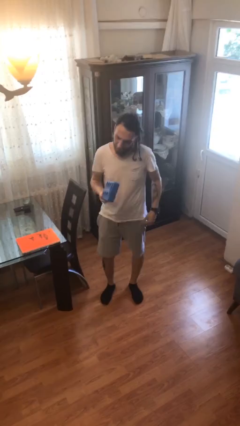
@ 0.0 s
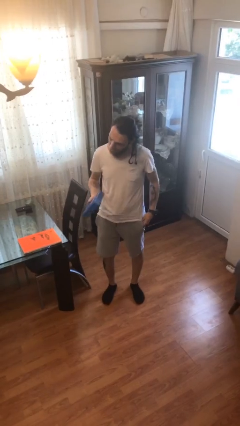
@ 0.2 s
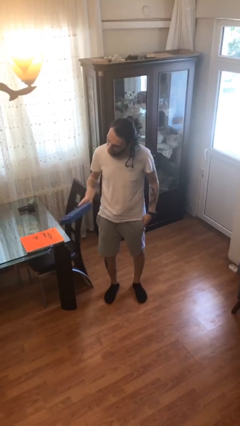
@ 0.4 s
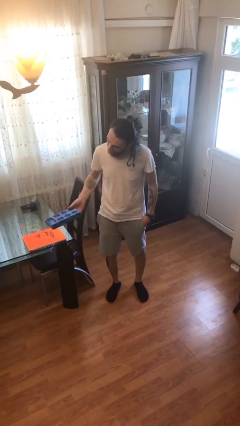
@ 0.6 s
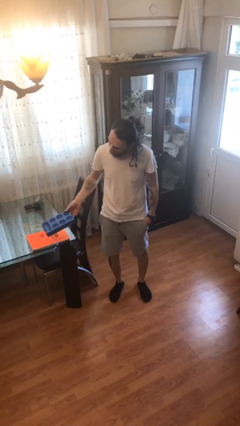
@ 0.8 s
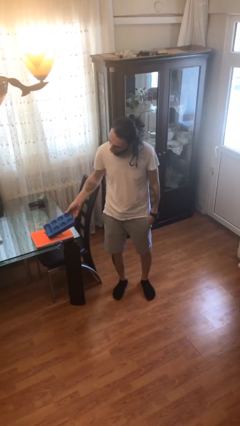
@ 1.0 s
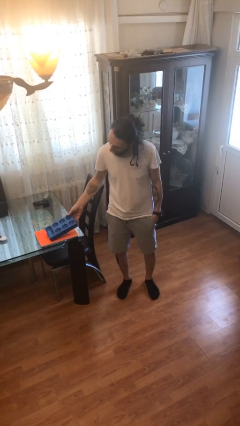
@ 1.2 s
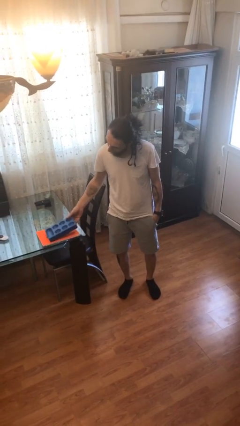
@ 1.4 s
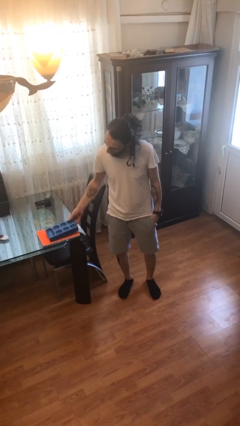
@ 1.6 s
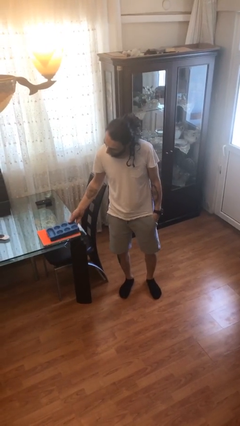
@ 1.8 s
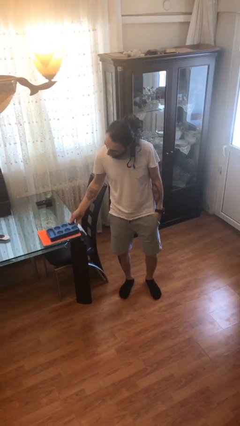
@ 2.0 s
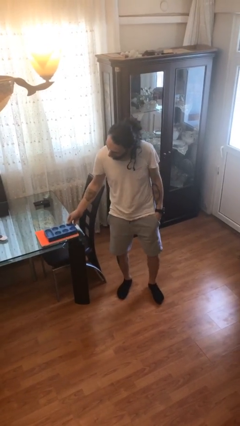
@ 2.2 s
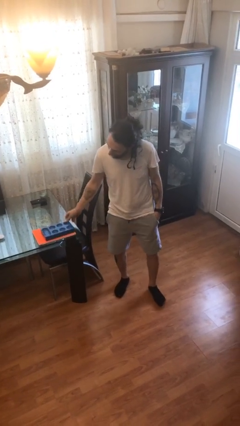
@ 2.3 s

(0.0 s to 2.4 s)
person puts down object on table

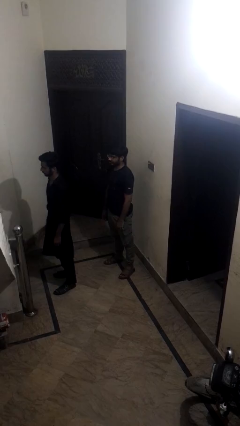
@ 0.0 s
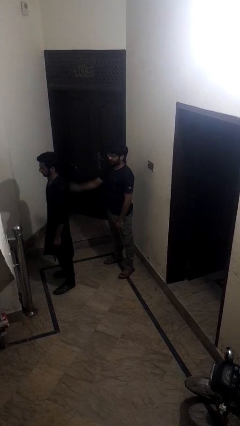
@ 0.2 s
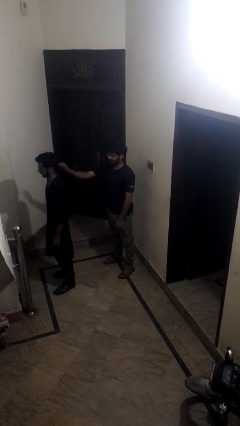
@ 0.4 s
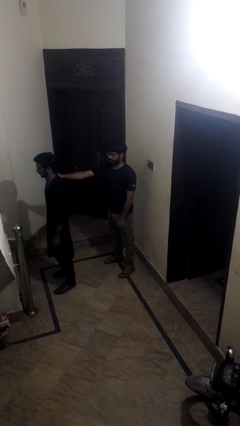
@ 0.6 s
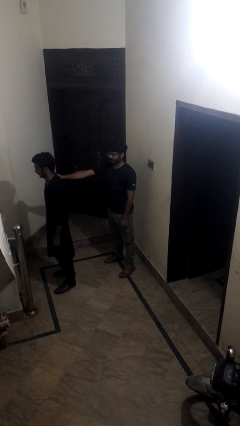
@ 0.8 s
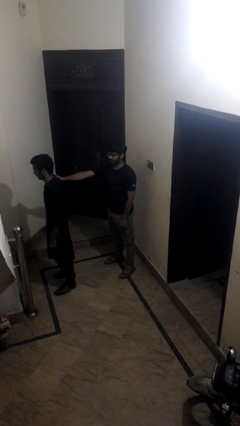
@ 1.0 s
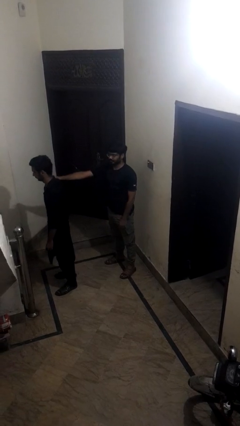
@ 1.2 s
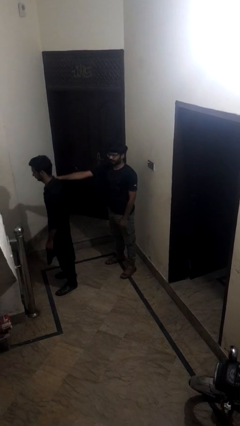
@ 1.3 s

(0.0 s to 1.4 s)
person grabs person by shoulder

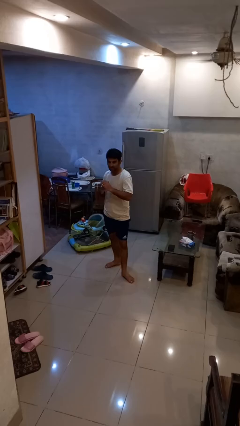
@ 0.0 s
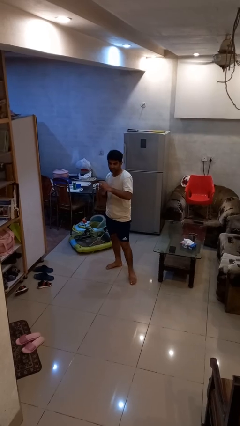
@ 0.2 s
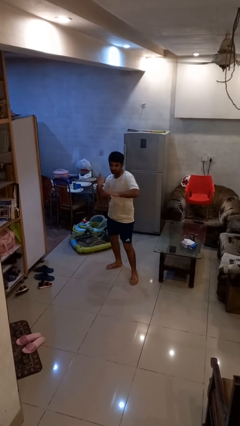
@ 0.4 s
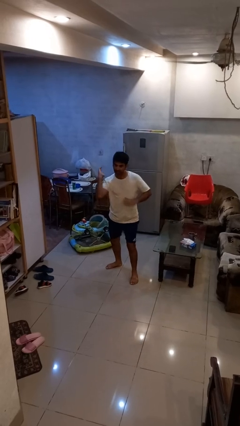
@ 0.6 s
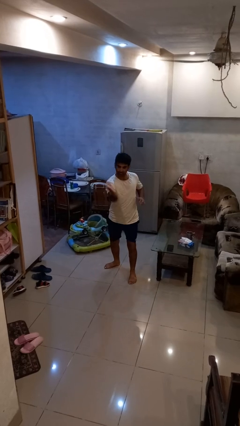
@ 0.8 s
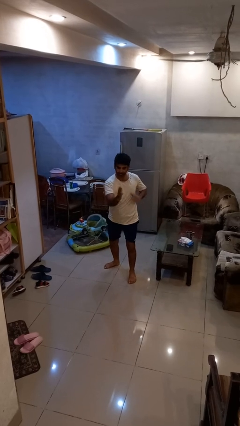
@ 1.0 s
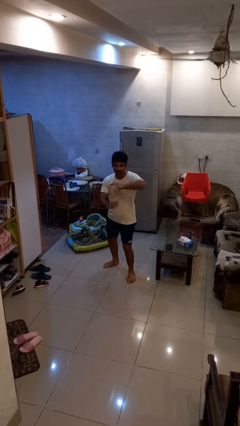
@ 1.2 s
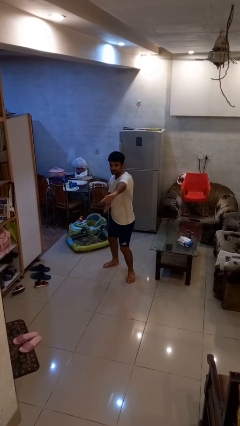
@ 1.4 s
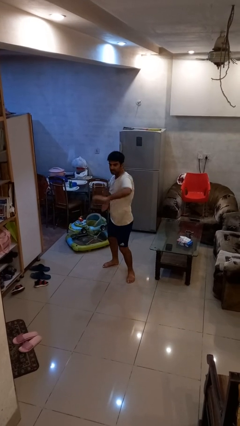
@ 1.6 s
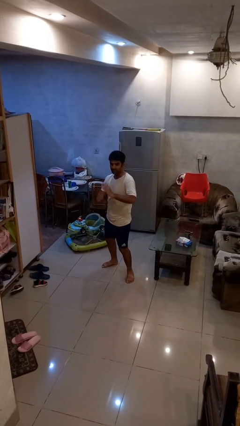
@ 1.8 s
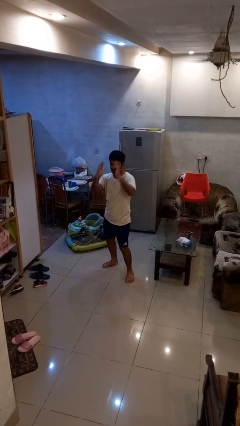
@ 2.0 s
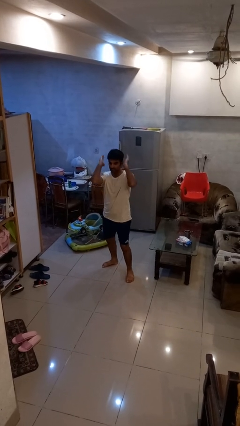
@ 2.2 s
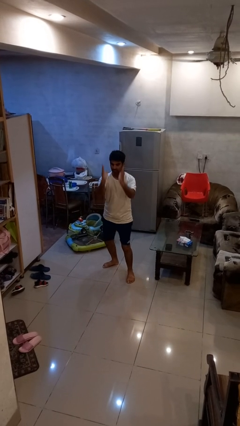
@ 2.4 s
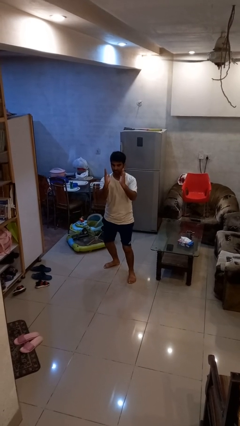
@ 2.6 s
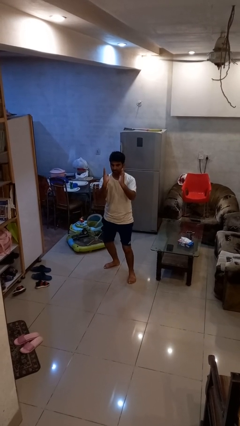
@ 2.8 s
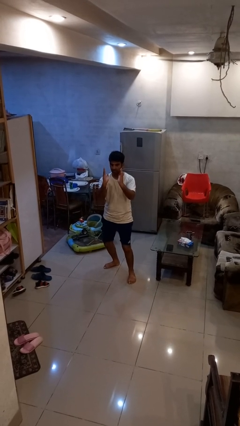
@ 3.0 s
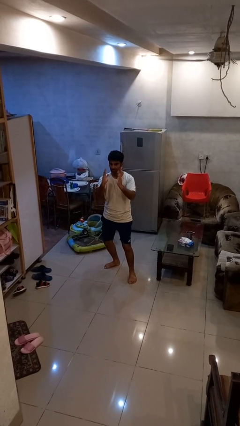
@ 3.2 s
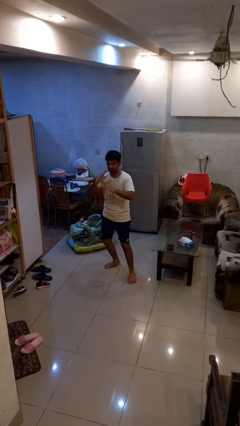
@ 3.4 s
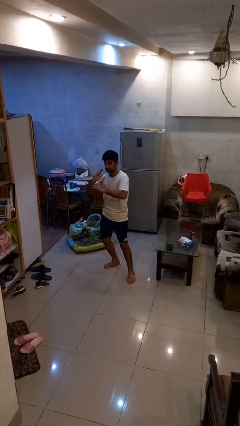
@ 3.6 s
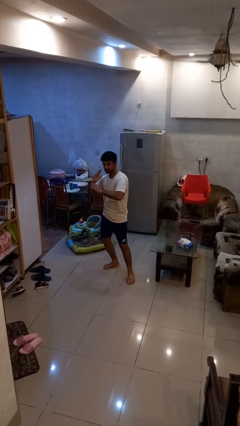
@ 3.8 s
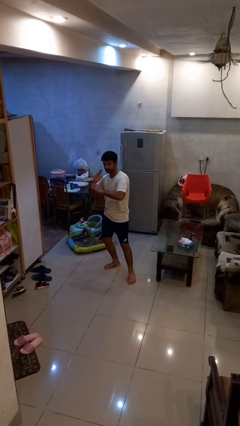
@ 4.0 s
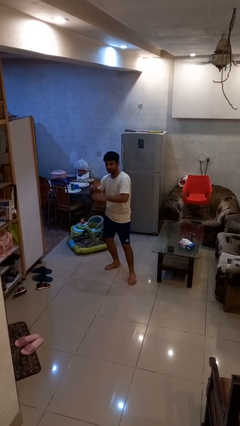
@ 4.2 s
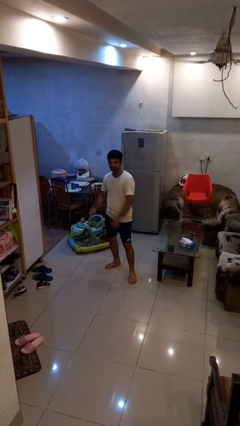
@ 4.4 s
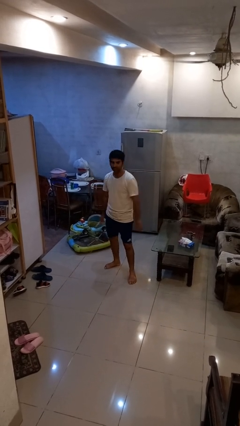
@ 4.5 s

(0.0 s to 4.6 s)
person karate chop

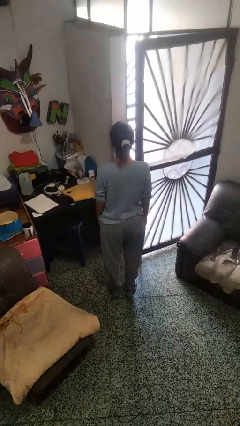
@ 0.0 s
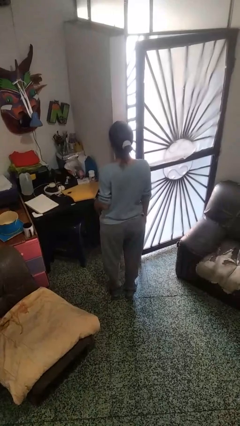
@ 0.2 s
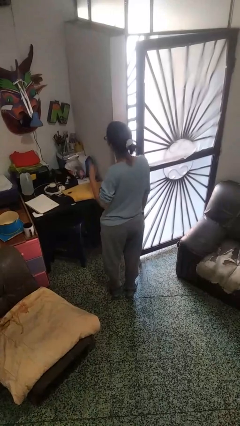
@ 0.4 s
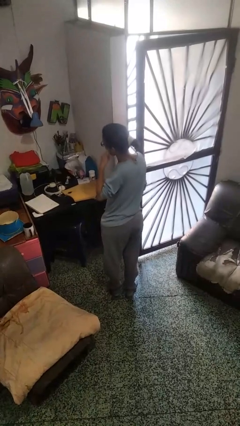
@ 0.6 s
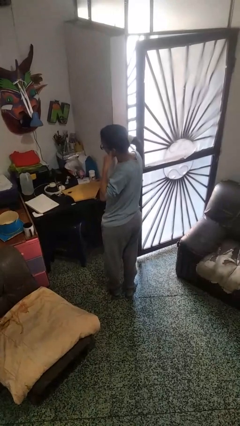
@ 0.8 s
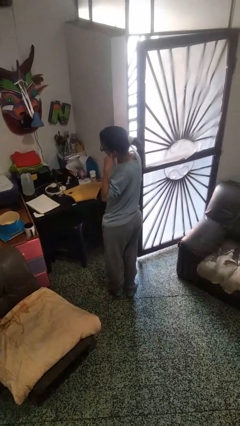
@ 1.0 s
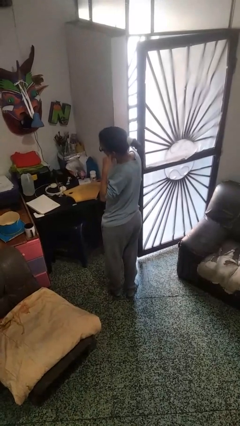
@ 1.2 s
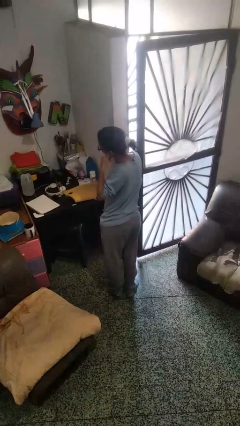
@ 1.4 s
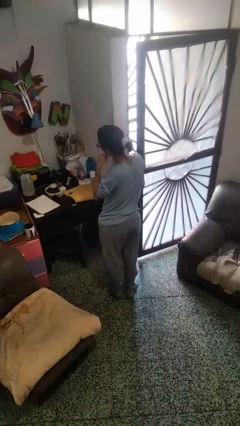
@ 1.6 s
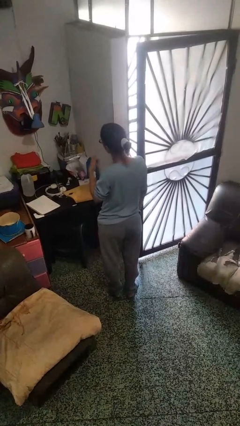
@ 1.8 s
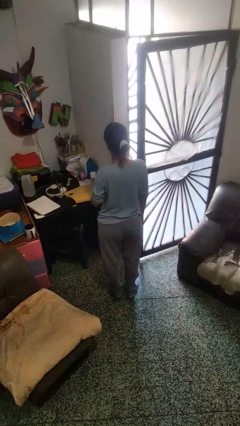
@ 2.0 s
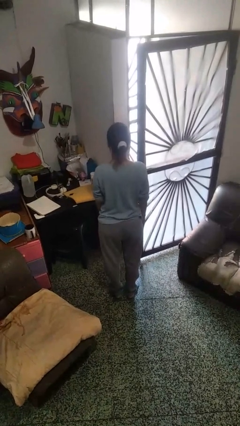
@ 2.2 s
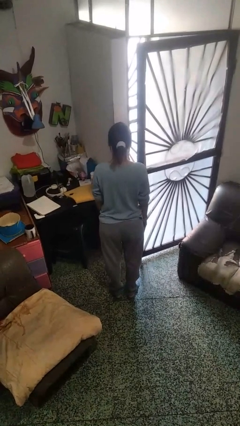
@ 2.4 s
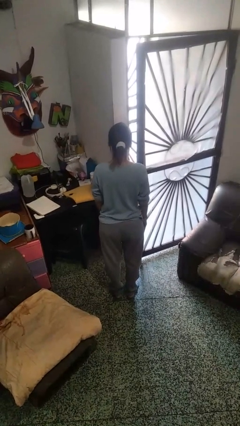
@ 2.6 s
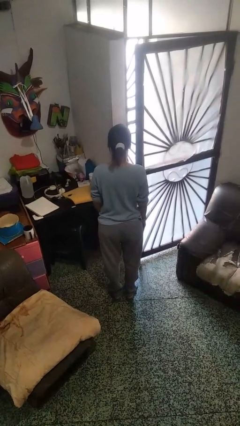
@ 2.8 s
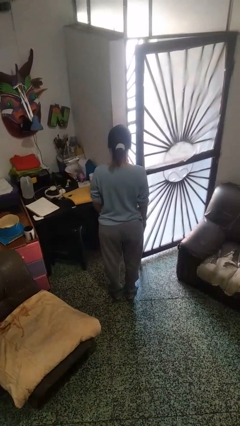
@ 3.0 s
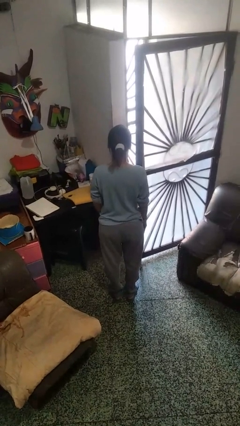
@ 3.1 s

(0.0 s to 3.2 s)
person gestures call me

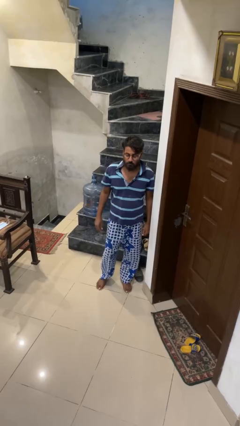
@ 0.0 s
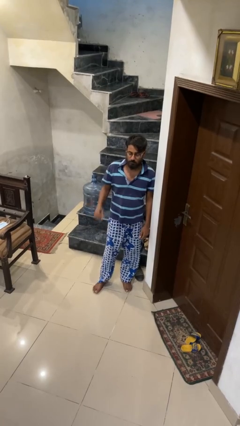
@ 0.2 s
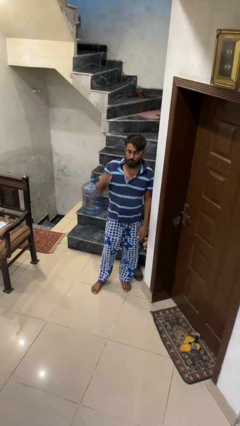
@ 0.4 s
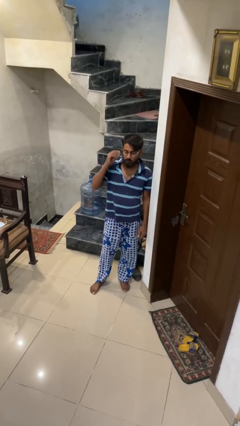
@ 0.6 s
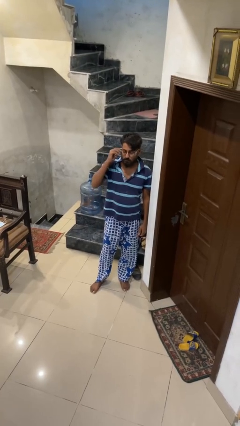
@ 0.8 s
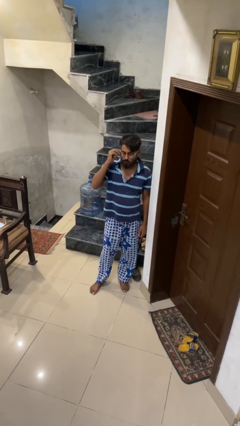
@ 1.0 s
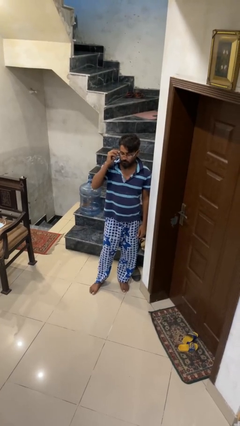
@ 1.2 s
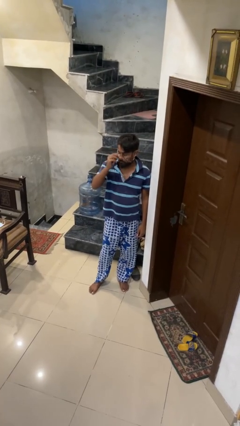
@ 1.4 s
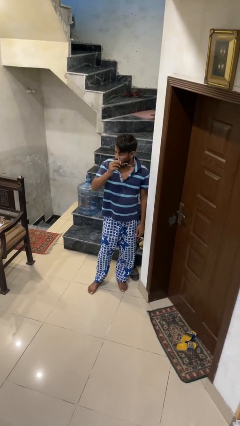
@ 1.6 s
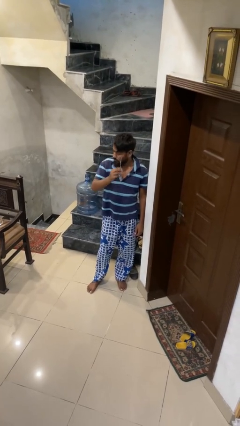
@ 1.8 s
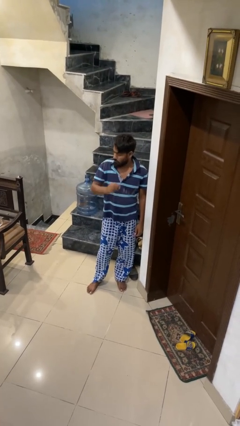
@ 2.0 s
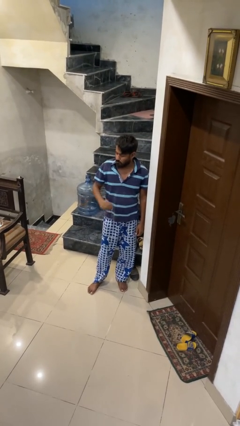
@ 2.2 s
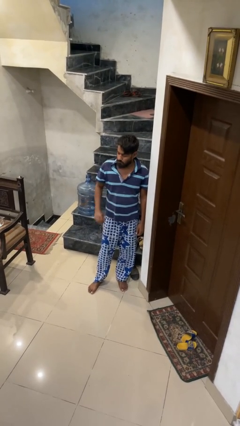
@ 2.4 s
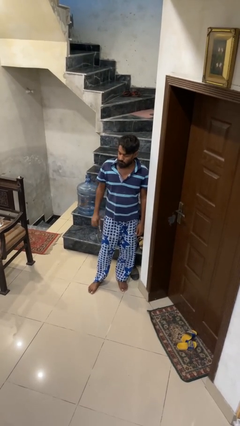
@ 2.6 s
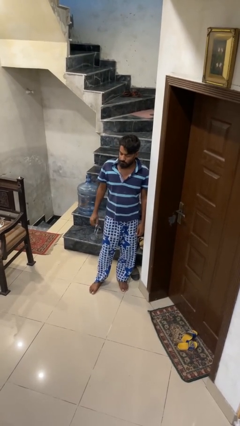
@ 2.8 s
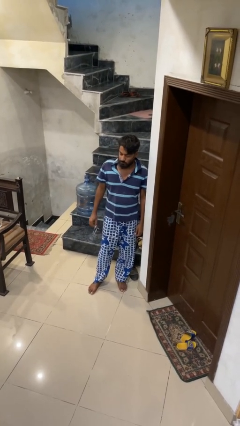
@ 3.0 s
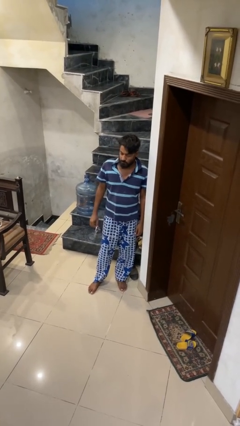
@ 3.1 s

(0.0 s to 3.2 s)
person takes off glasses

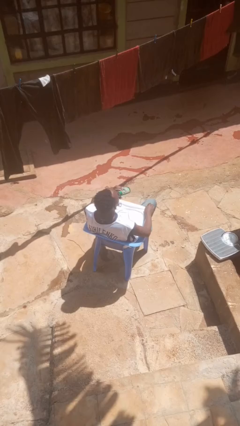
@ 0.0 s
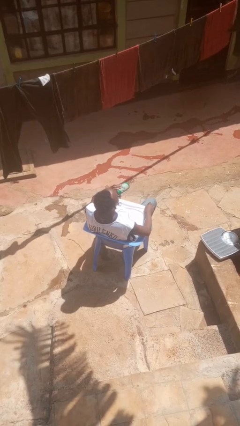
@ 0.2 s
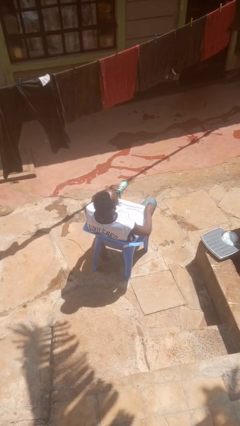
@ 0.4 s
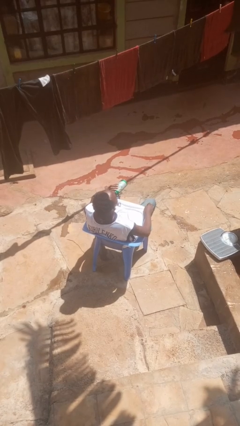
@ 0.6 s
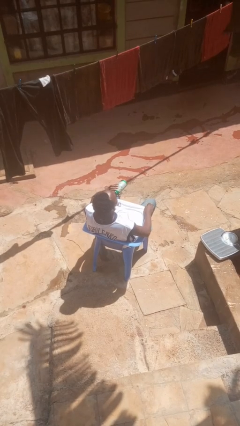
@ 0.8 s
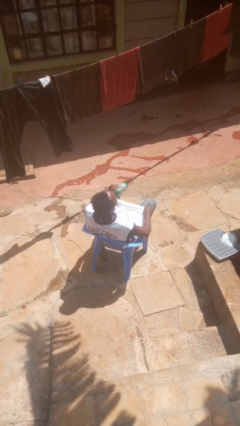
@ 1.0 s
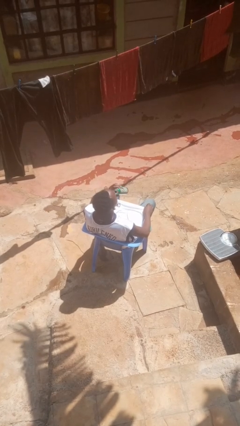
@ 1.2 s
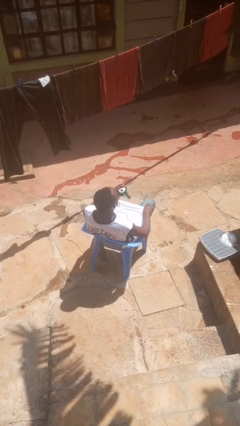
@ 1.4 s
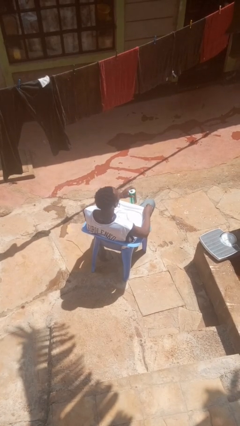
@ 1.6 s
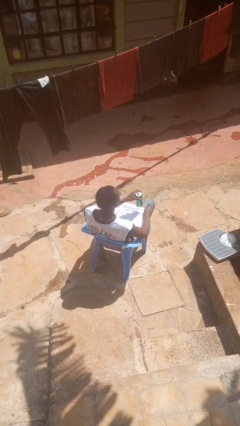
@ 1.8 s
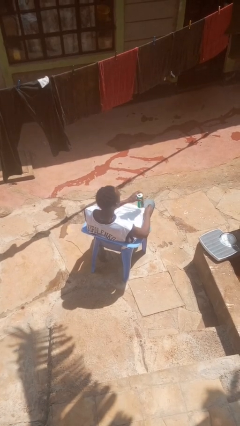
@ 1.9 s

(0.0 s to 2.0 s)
person drinks from beverage can

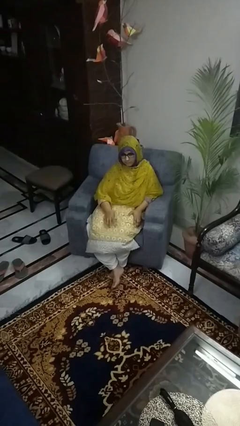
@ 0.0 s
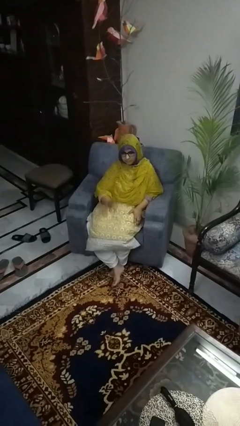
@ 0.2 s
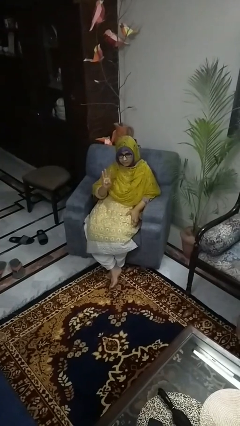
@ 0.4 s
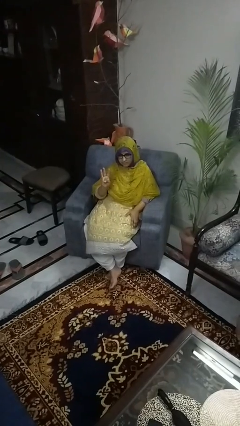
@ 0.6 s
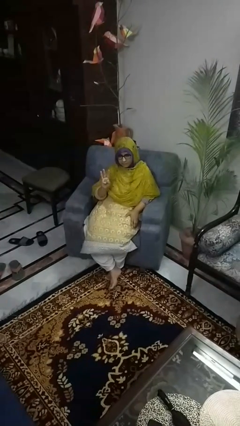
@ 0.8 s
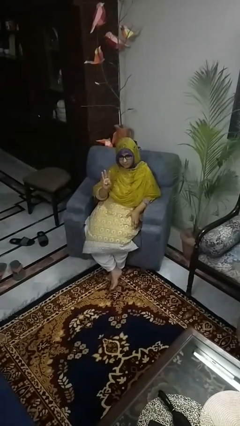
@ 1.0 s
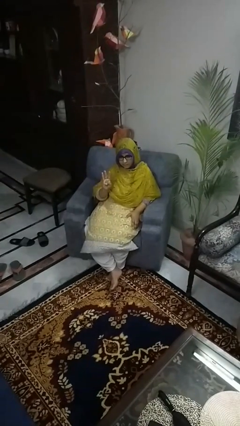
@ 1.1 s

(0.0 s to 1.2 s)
person gestures number three
